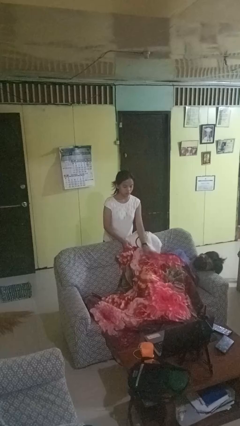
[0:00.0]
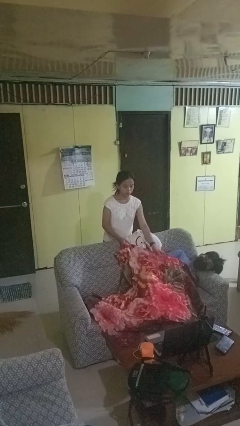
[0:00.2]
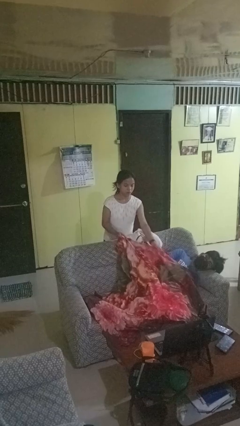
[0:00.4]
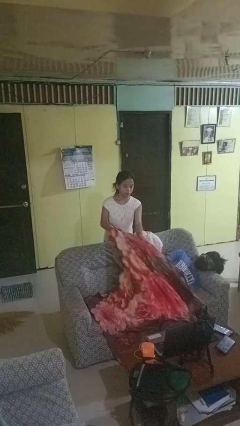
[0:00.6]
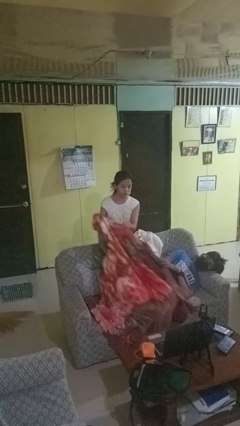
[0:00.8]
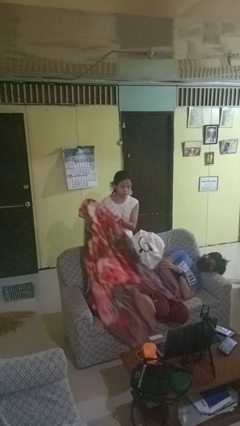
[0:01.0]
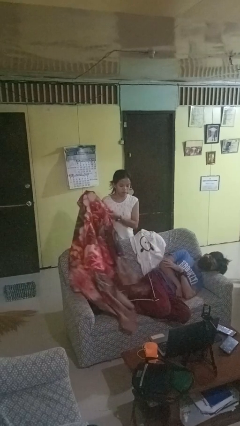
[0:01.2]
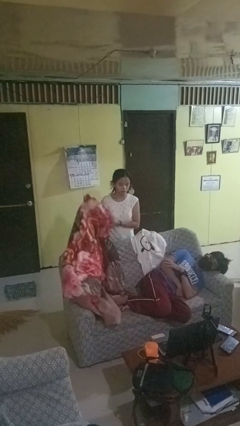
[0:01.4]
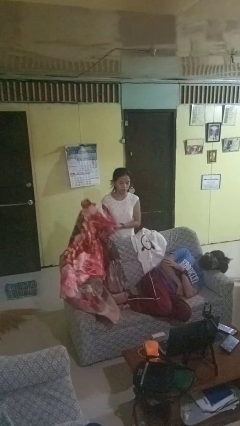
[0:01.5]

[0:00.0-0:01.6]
person uncovers friend with blanket

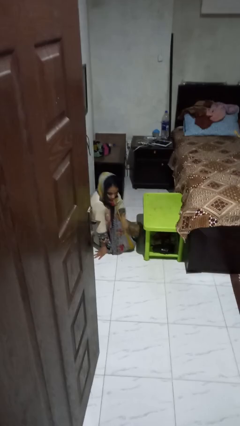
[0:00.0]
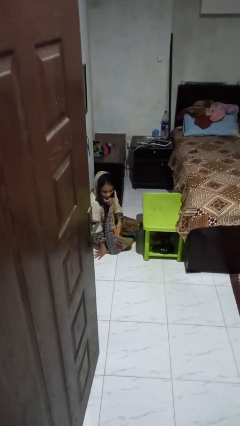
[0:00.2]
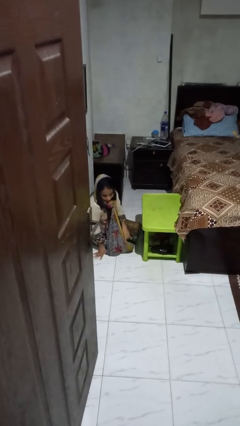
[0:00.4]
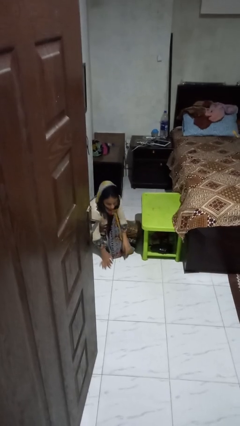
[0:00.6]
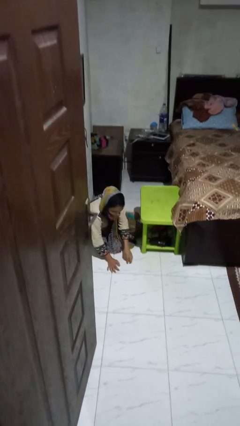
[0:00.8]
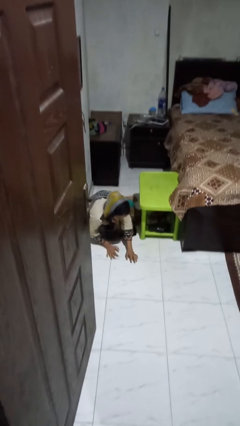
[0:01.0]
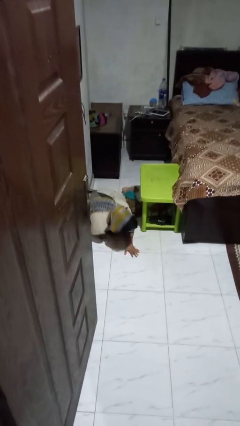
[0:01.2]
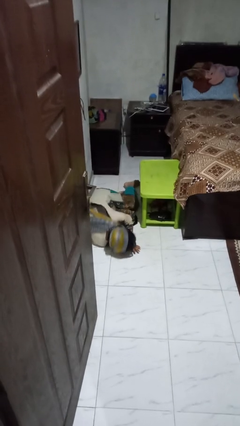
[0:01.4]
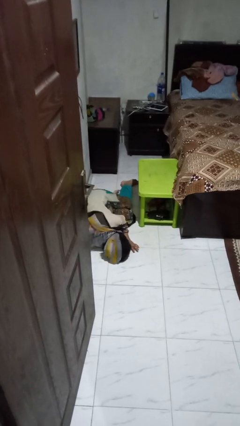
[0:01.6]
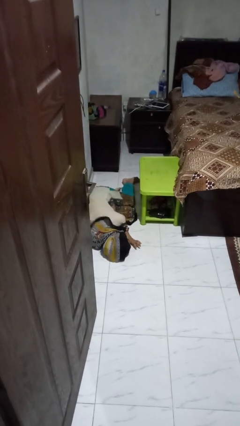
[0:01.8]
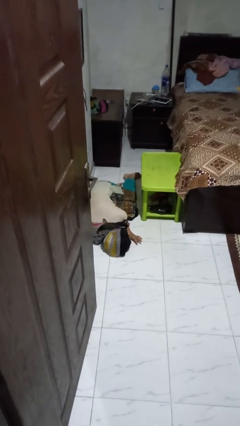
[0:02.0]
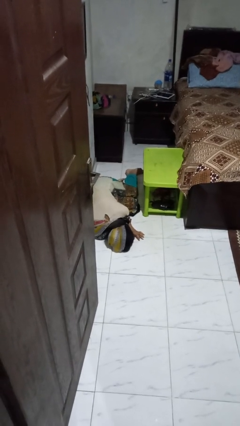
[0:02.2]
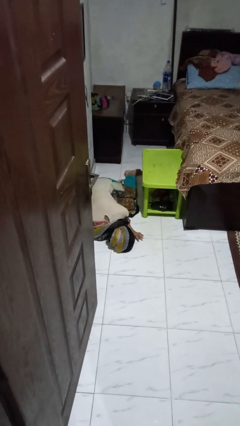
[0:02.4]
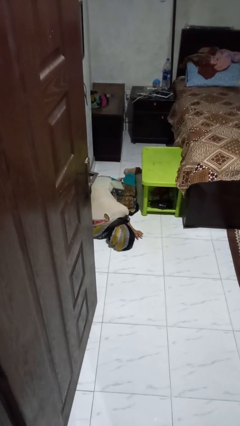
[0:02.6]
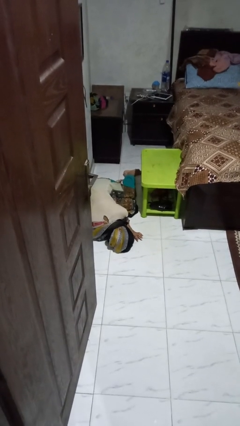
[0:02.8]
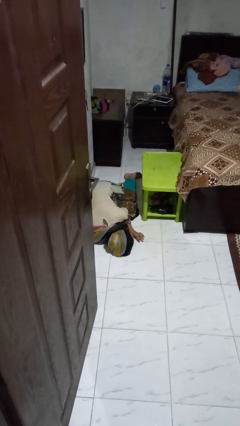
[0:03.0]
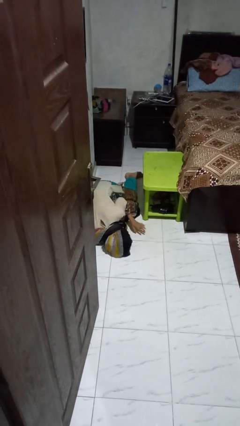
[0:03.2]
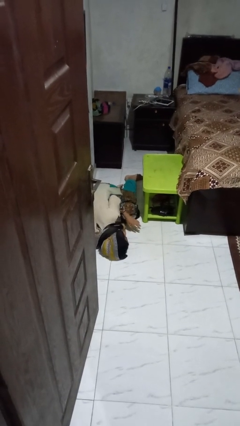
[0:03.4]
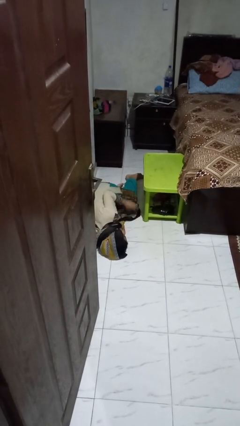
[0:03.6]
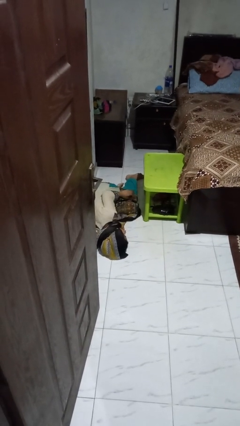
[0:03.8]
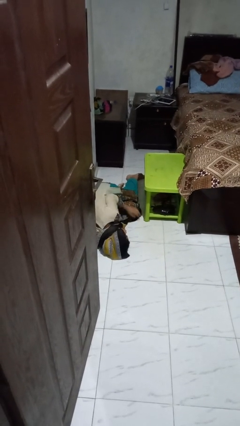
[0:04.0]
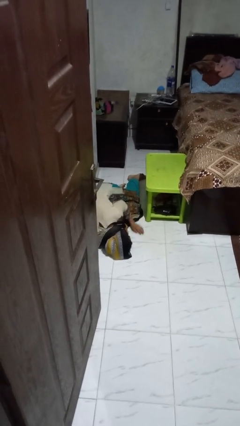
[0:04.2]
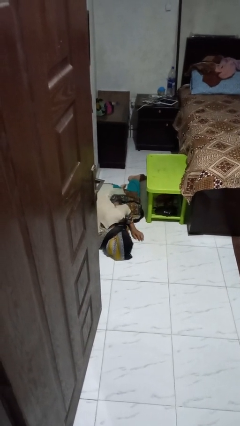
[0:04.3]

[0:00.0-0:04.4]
person lies down on floor

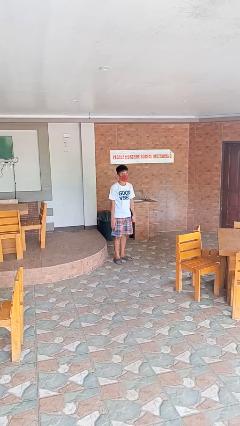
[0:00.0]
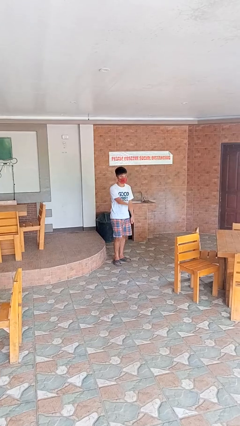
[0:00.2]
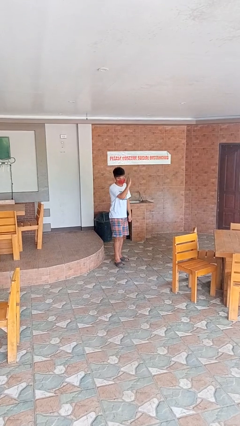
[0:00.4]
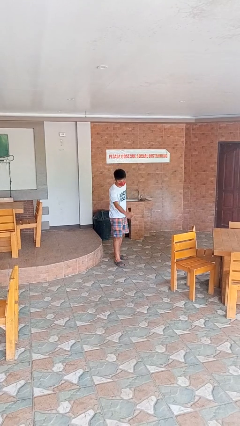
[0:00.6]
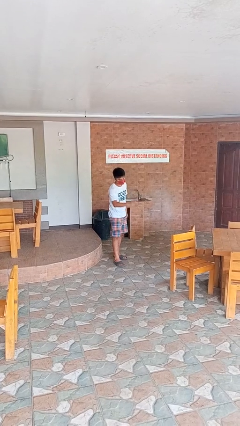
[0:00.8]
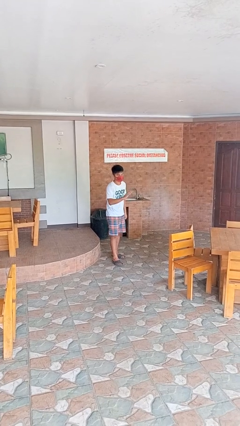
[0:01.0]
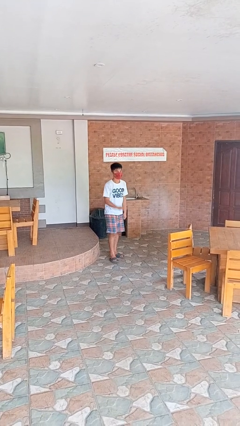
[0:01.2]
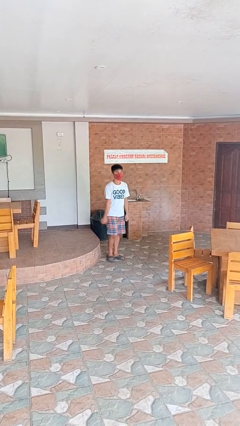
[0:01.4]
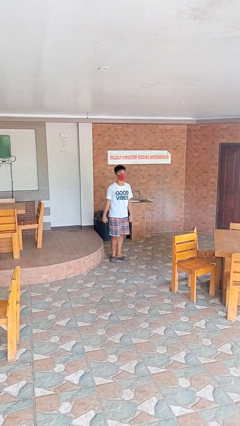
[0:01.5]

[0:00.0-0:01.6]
person karate chop

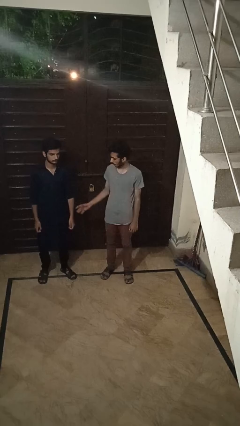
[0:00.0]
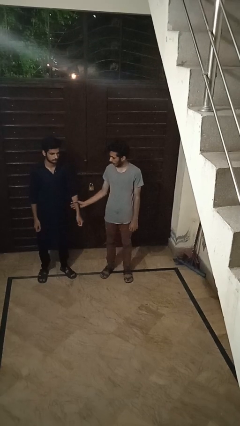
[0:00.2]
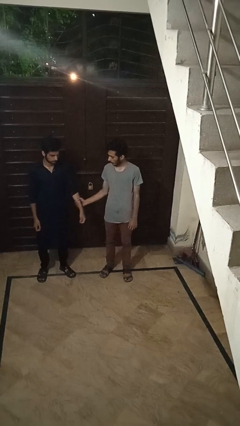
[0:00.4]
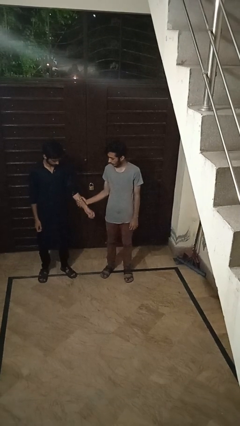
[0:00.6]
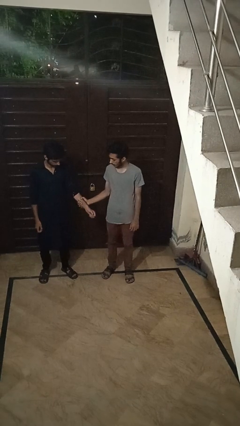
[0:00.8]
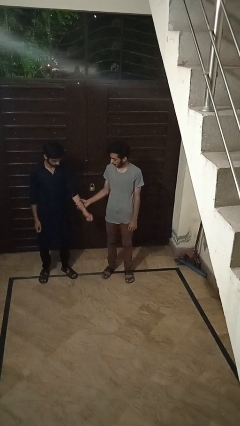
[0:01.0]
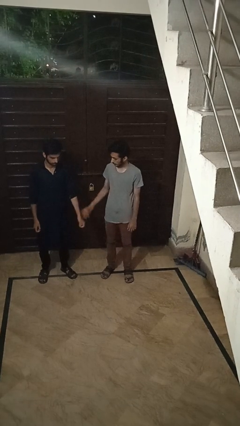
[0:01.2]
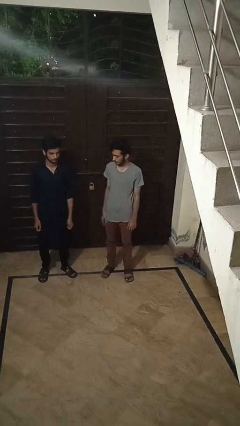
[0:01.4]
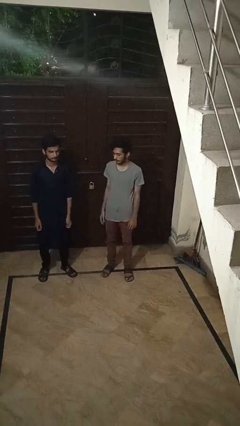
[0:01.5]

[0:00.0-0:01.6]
person grabs person by forearm

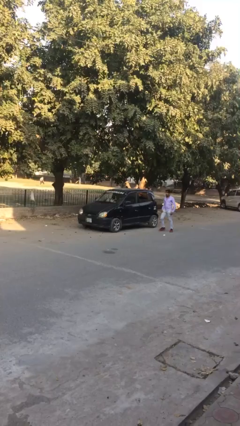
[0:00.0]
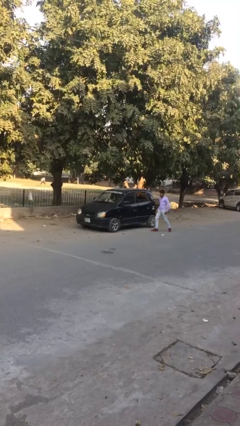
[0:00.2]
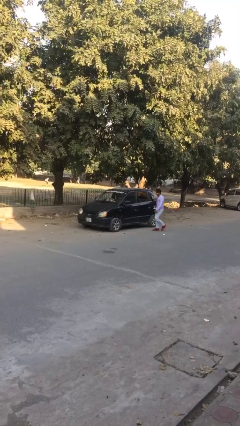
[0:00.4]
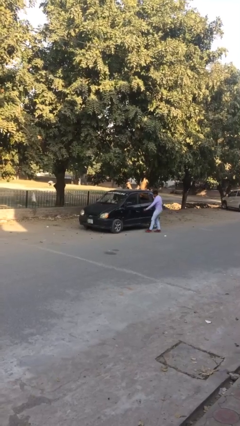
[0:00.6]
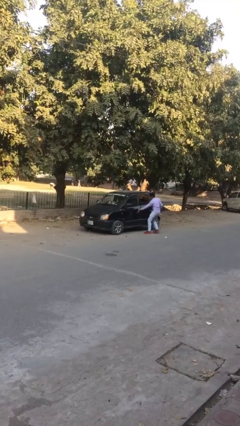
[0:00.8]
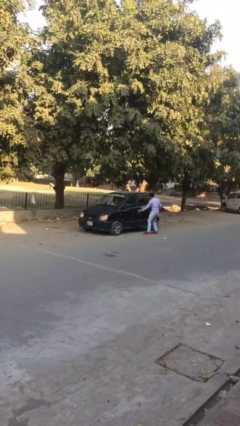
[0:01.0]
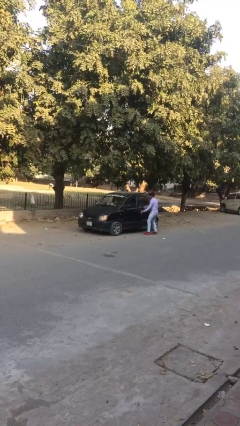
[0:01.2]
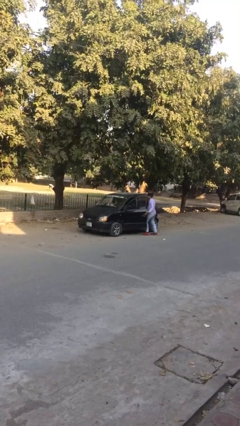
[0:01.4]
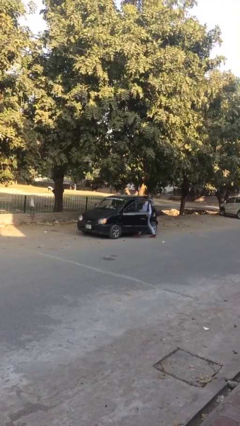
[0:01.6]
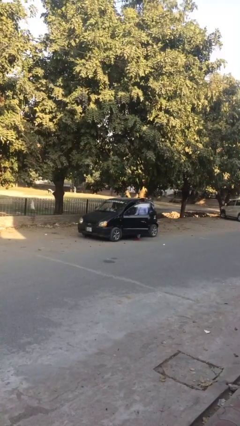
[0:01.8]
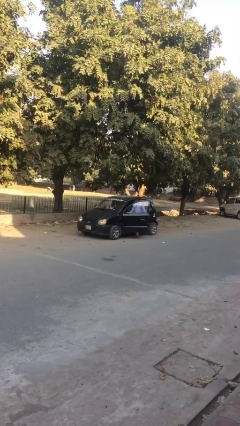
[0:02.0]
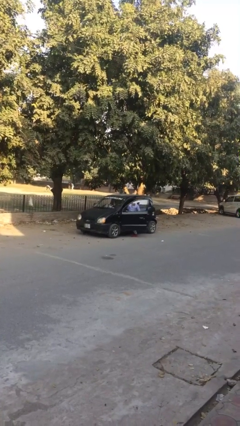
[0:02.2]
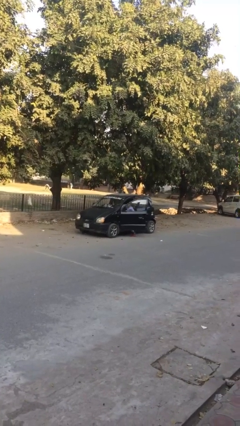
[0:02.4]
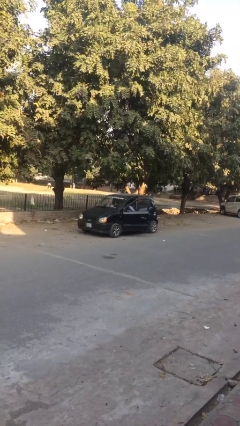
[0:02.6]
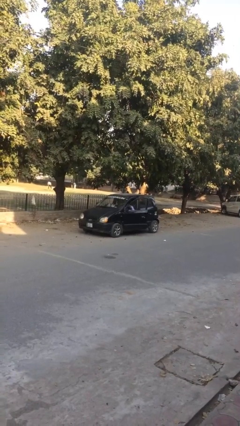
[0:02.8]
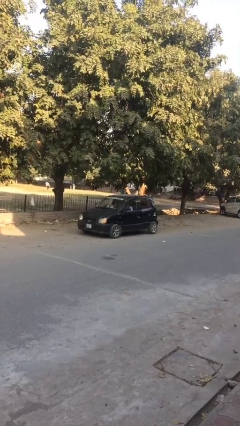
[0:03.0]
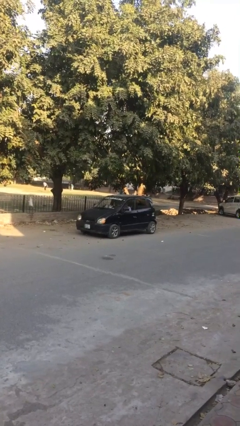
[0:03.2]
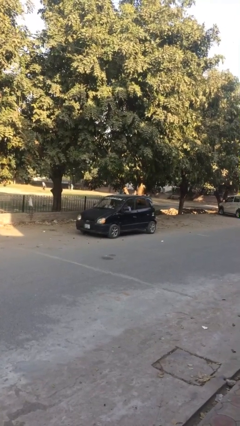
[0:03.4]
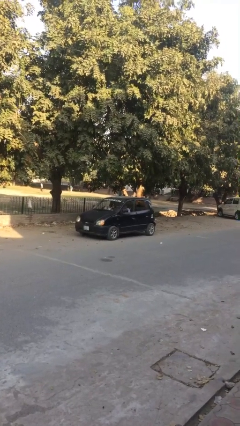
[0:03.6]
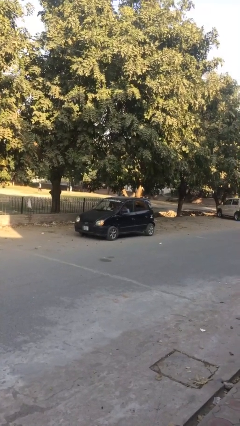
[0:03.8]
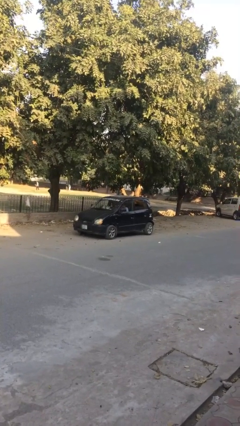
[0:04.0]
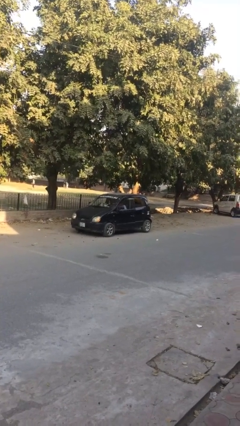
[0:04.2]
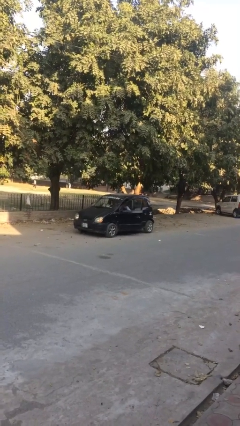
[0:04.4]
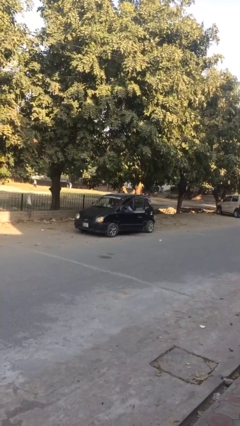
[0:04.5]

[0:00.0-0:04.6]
car picks up person

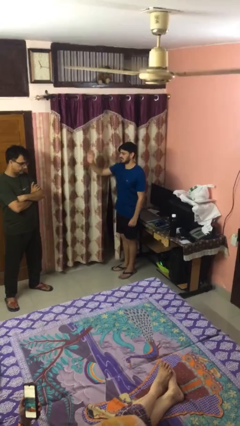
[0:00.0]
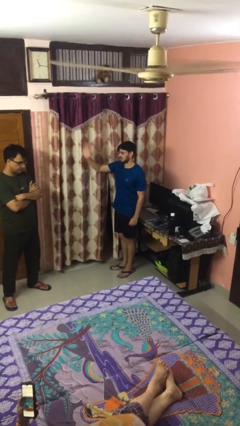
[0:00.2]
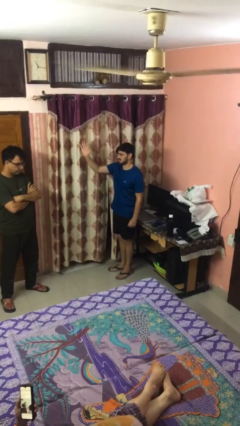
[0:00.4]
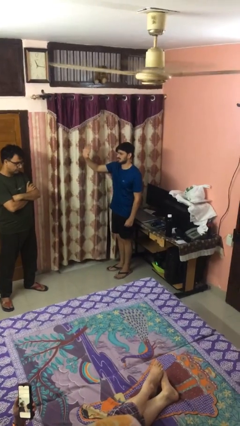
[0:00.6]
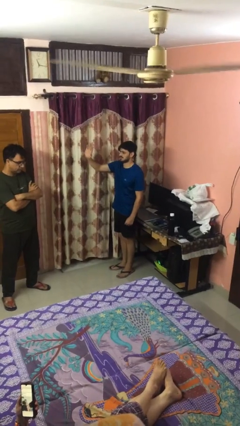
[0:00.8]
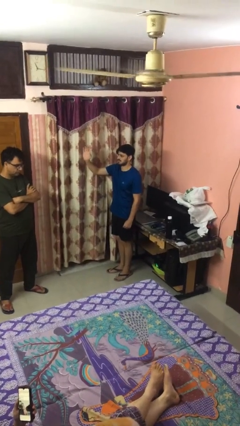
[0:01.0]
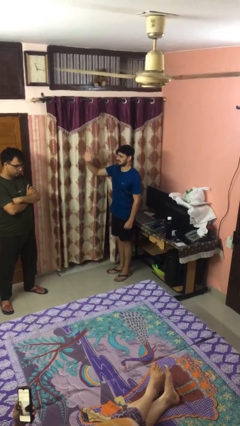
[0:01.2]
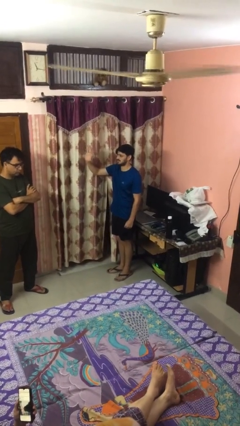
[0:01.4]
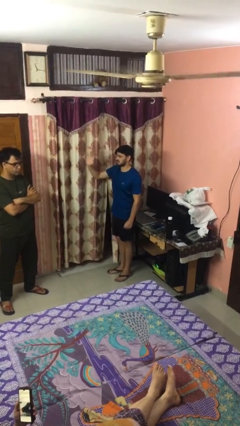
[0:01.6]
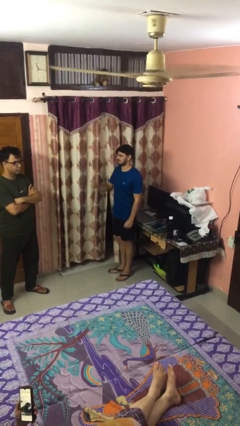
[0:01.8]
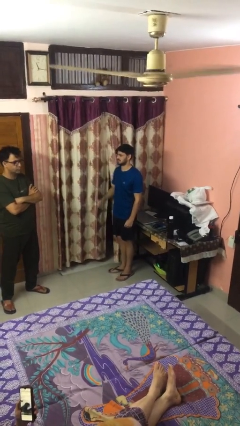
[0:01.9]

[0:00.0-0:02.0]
person waves at person

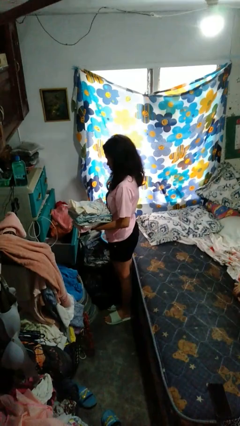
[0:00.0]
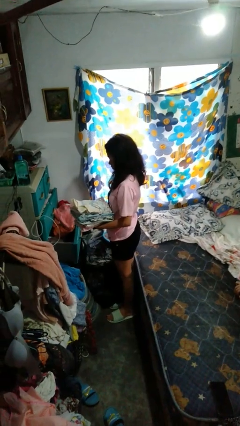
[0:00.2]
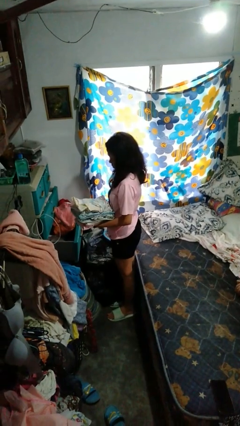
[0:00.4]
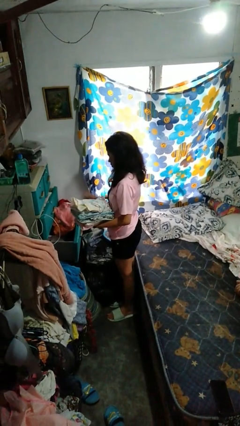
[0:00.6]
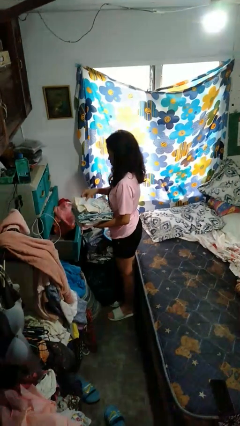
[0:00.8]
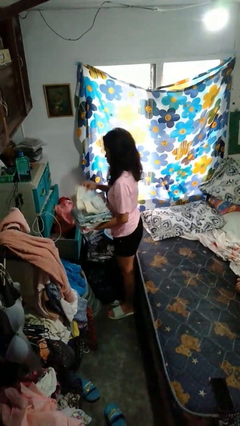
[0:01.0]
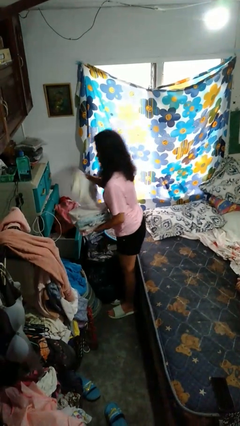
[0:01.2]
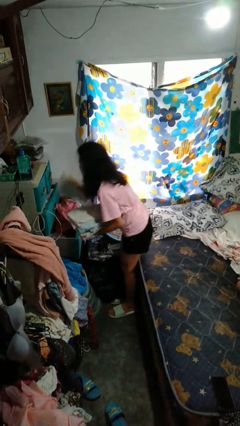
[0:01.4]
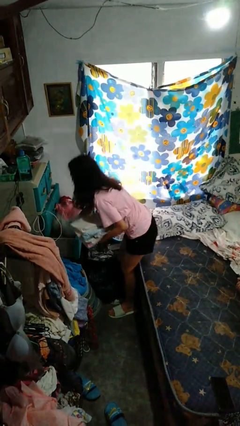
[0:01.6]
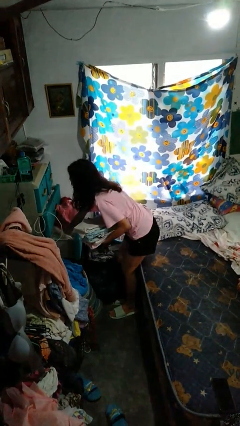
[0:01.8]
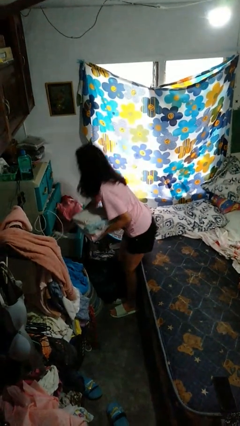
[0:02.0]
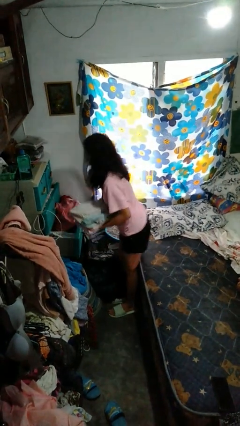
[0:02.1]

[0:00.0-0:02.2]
person puts clothes into dresser
